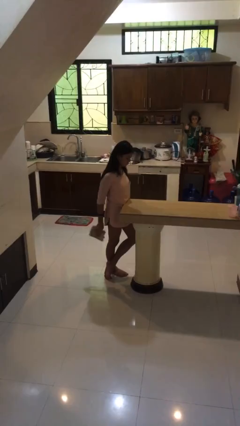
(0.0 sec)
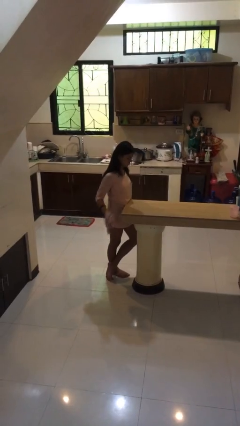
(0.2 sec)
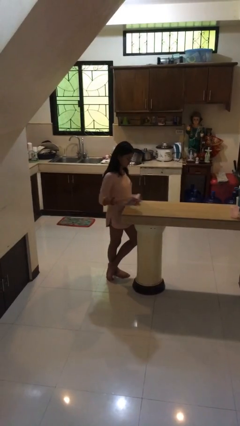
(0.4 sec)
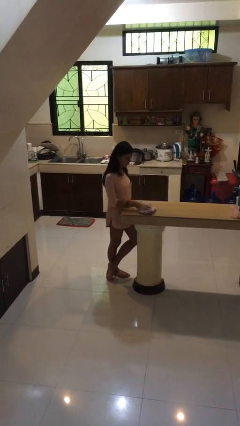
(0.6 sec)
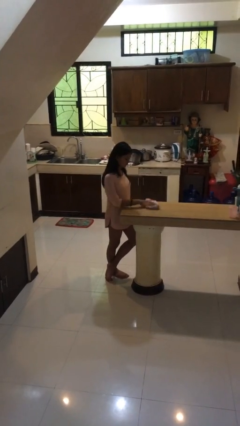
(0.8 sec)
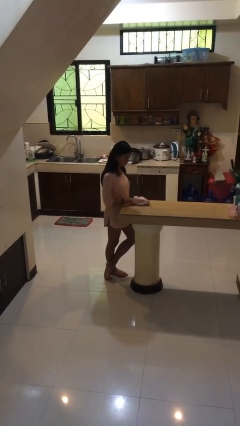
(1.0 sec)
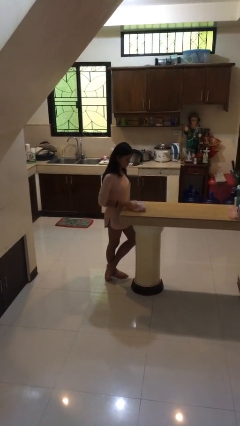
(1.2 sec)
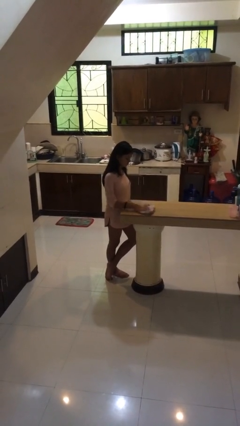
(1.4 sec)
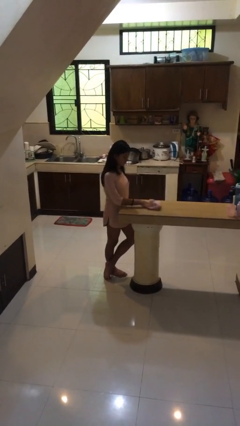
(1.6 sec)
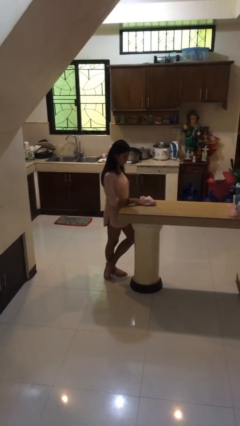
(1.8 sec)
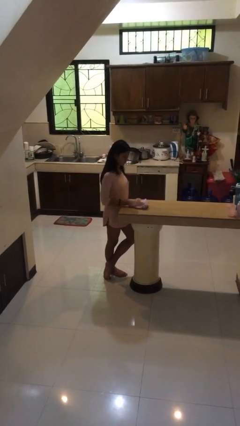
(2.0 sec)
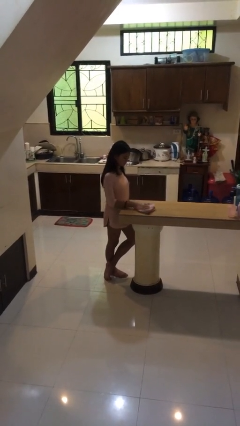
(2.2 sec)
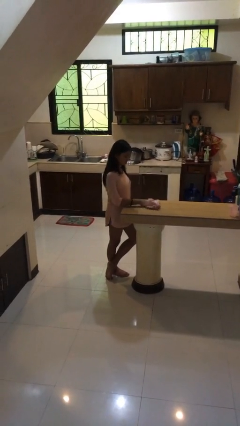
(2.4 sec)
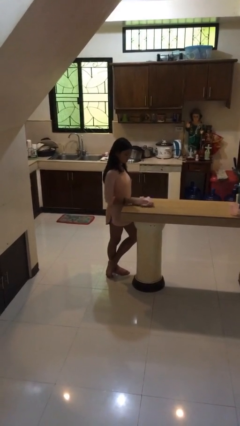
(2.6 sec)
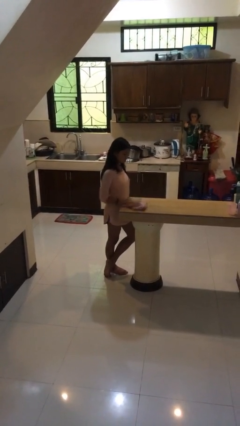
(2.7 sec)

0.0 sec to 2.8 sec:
person cleans table with rag

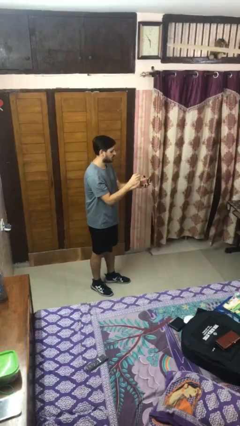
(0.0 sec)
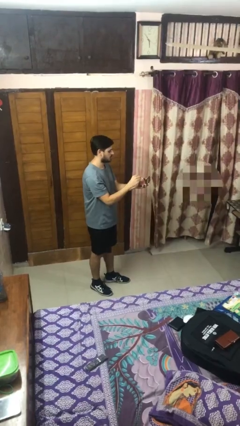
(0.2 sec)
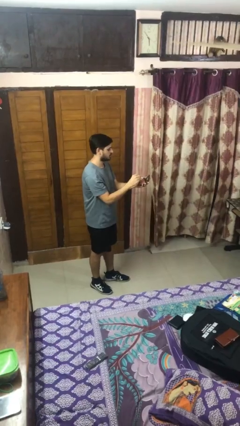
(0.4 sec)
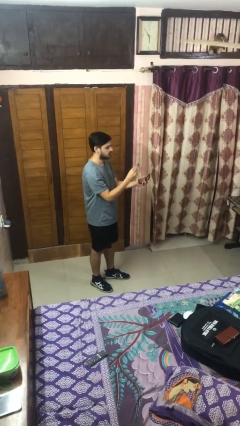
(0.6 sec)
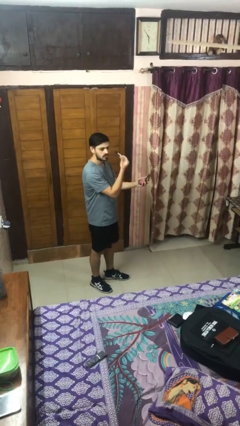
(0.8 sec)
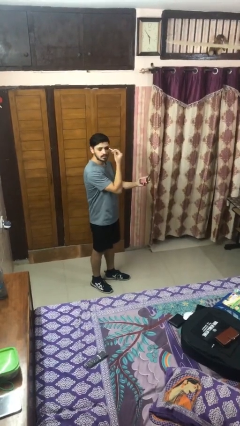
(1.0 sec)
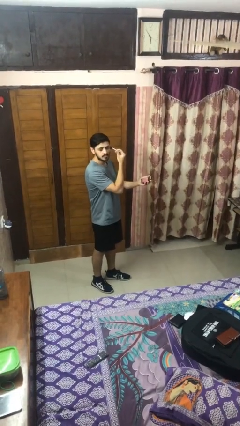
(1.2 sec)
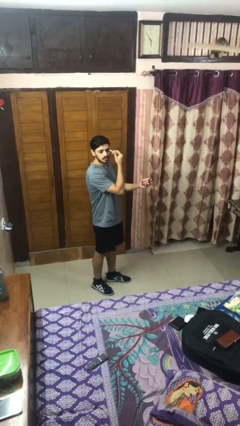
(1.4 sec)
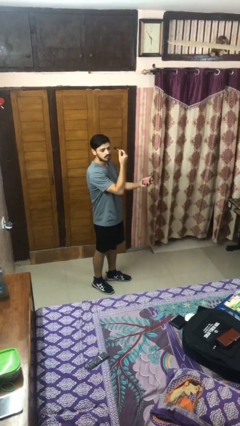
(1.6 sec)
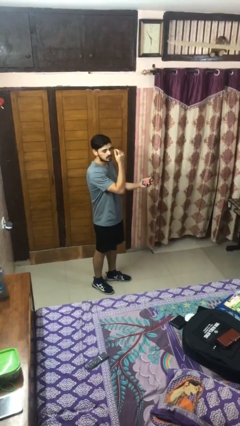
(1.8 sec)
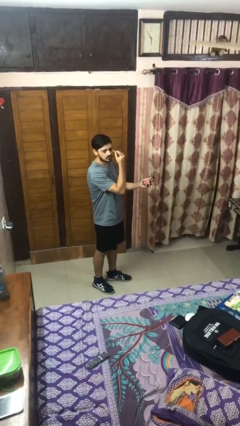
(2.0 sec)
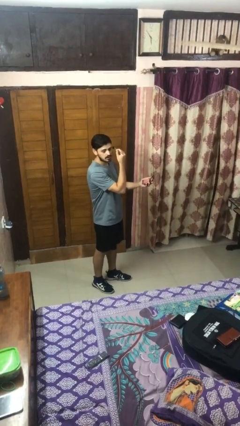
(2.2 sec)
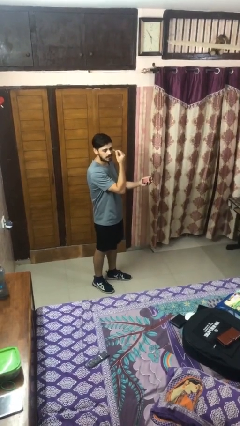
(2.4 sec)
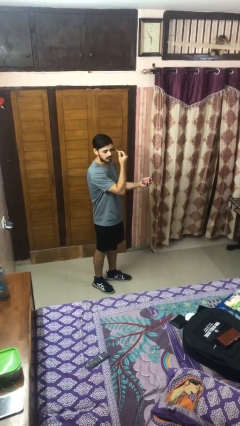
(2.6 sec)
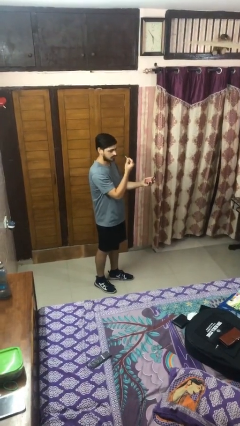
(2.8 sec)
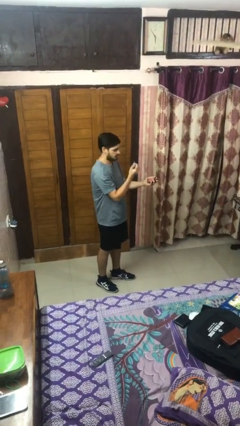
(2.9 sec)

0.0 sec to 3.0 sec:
person applies eye makeup

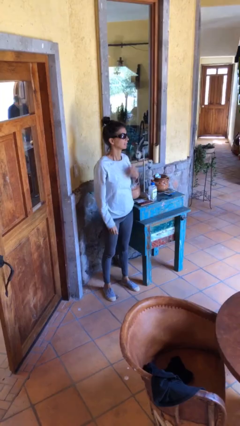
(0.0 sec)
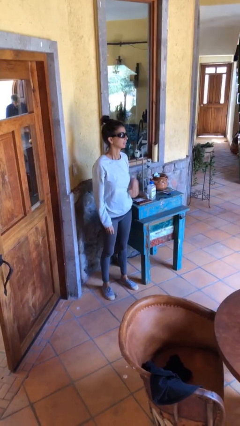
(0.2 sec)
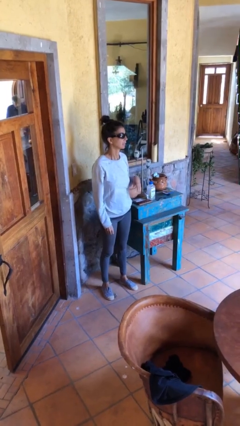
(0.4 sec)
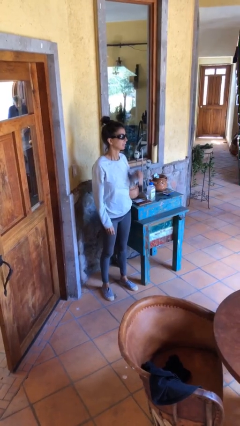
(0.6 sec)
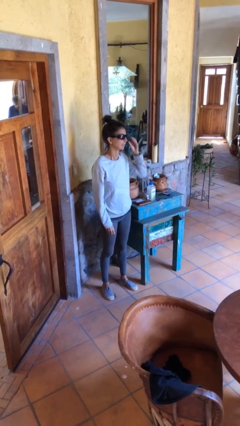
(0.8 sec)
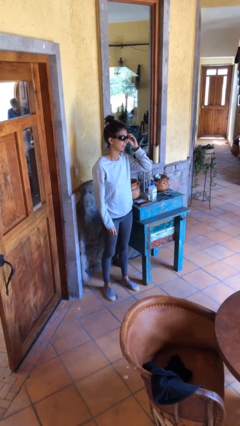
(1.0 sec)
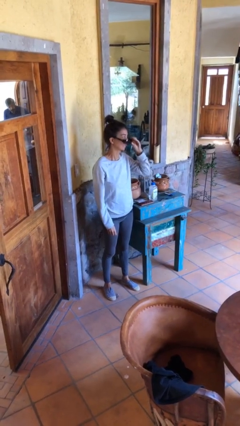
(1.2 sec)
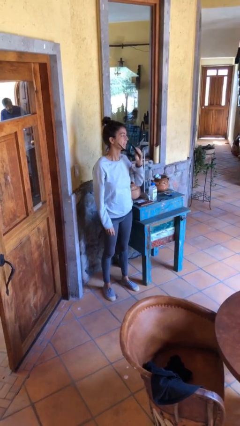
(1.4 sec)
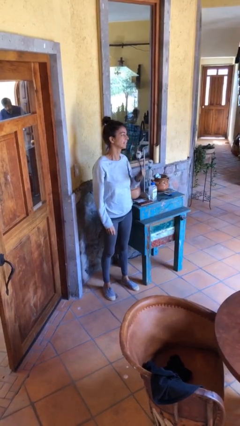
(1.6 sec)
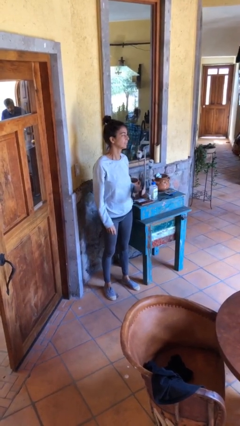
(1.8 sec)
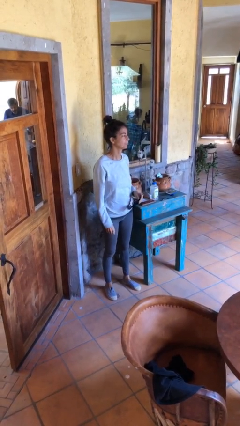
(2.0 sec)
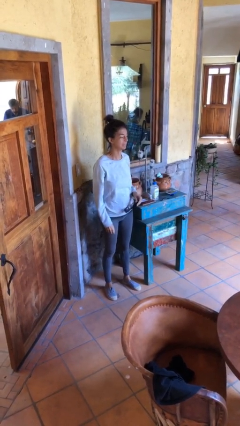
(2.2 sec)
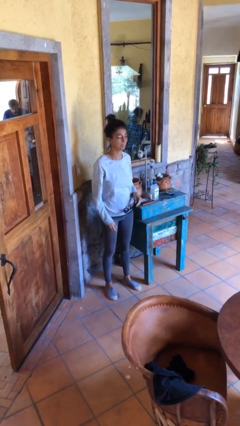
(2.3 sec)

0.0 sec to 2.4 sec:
person takes off sunglasses

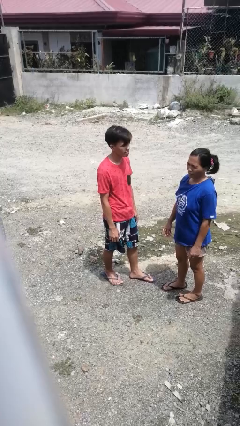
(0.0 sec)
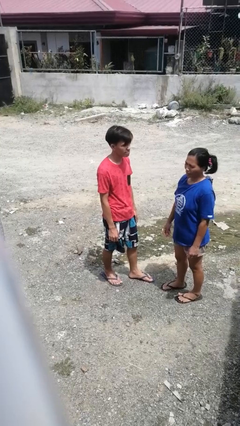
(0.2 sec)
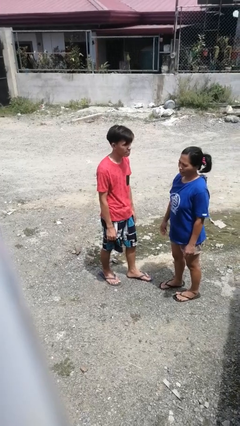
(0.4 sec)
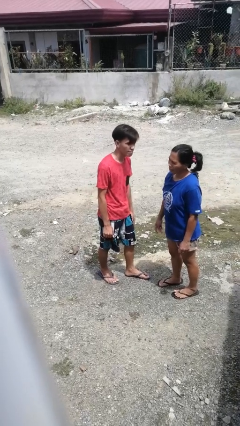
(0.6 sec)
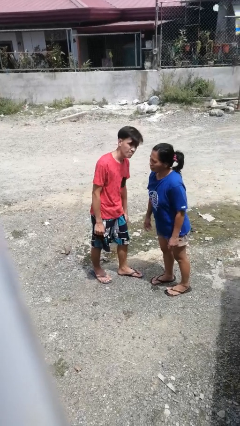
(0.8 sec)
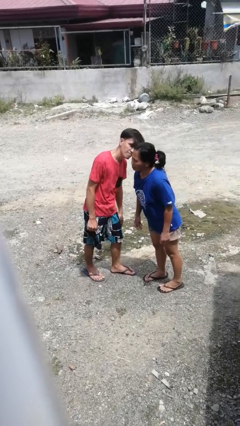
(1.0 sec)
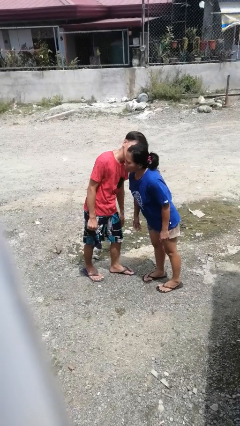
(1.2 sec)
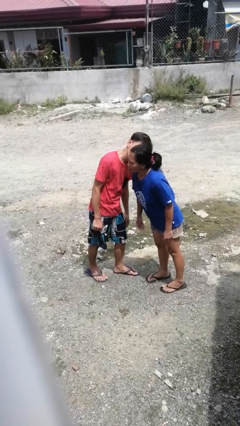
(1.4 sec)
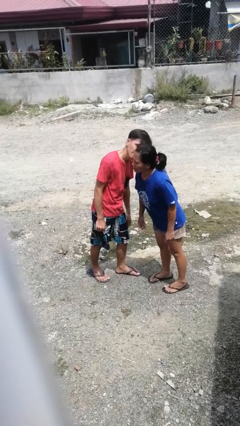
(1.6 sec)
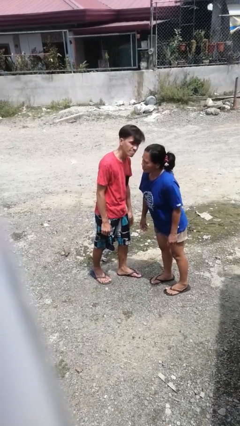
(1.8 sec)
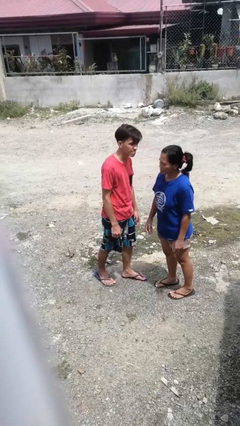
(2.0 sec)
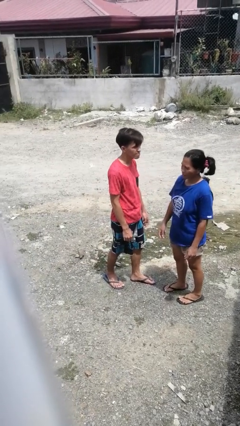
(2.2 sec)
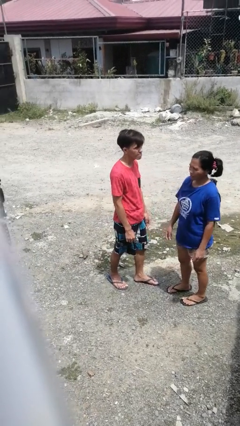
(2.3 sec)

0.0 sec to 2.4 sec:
person kisses cheek of person

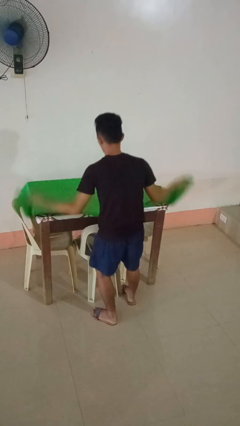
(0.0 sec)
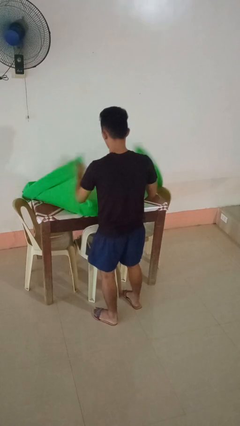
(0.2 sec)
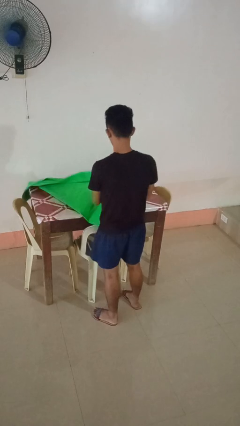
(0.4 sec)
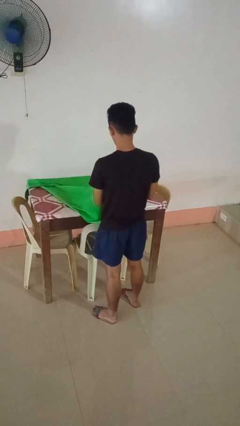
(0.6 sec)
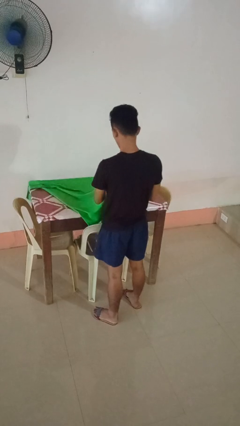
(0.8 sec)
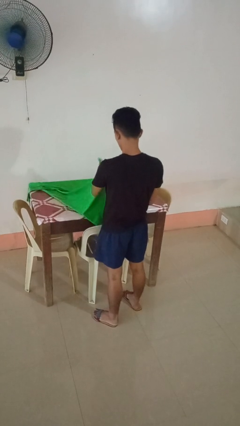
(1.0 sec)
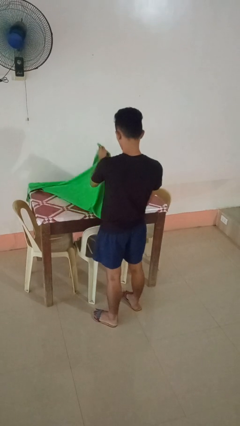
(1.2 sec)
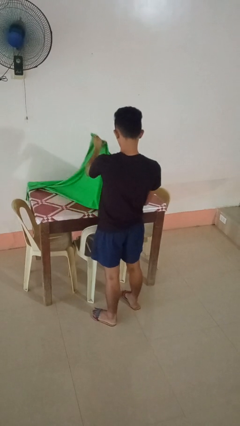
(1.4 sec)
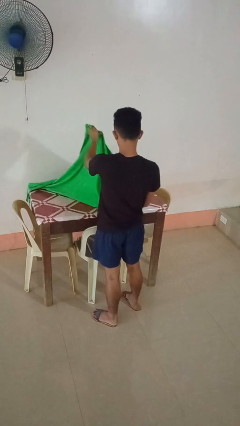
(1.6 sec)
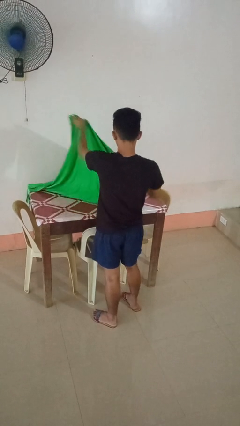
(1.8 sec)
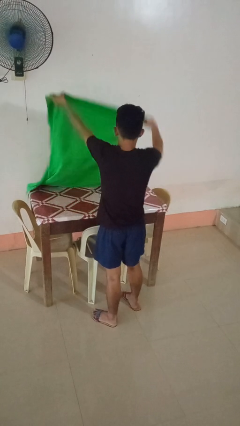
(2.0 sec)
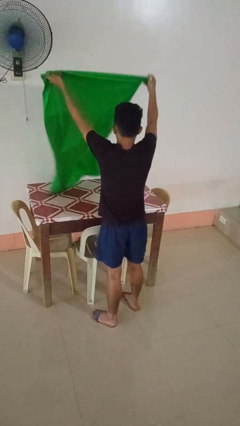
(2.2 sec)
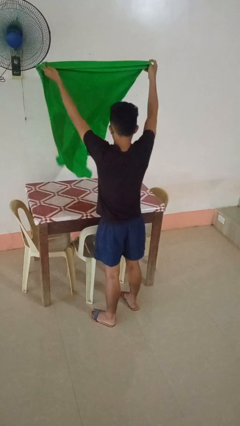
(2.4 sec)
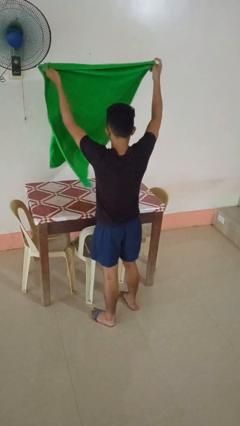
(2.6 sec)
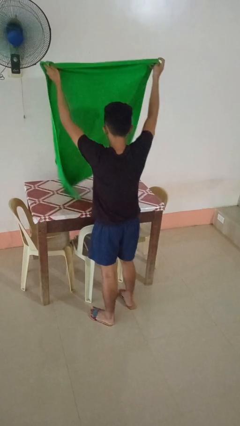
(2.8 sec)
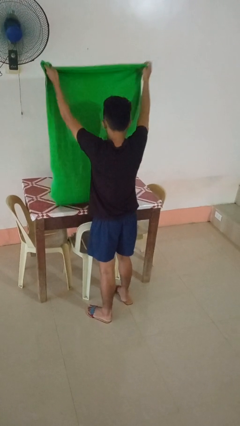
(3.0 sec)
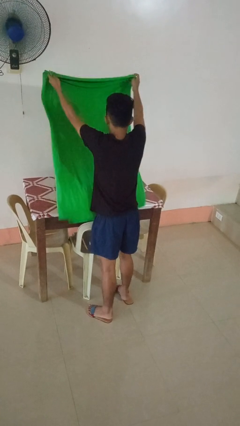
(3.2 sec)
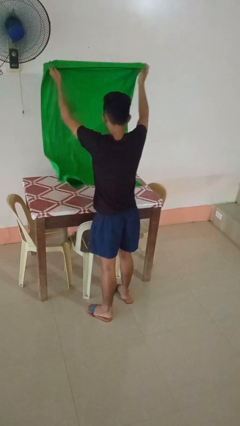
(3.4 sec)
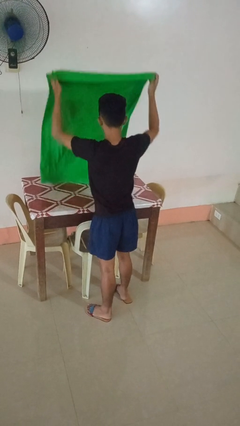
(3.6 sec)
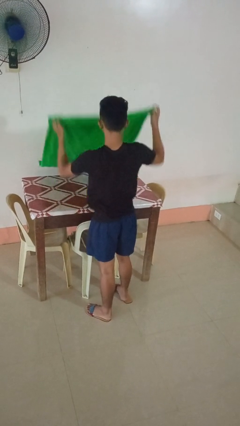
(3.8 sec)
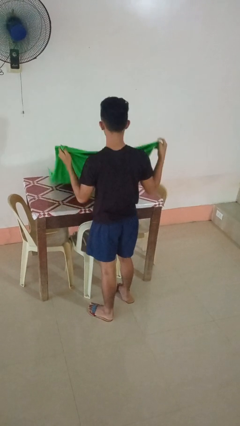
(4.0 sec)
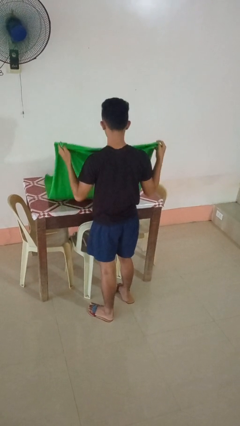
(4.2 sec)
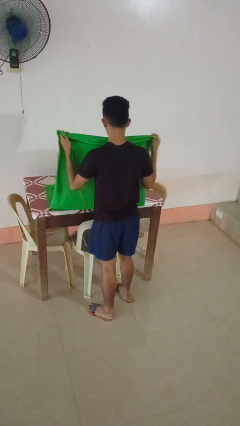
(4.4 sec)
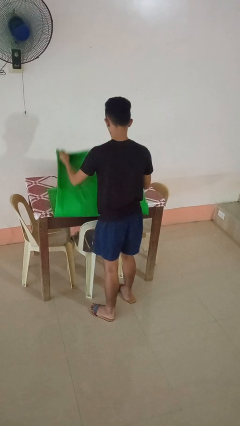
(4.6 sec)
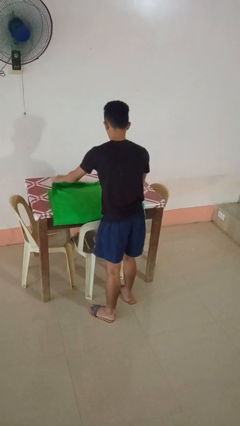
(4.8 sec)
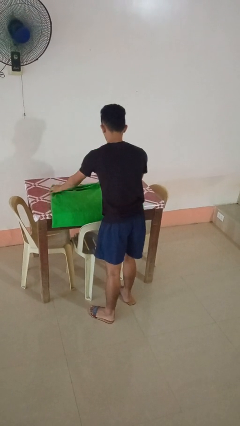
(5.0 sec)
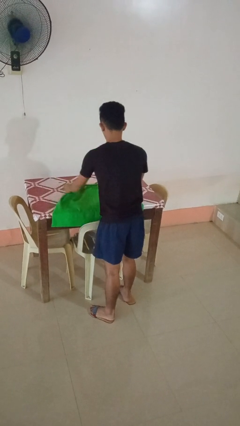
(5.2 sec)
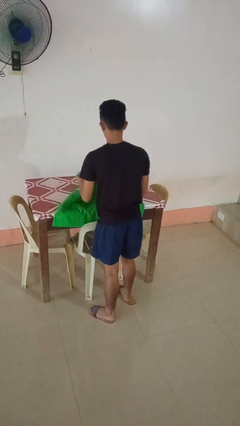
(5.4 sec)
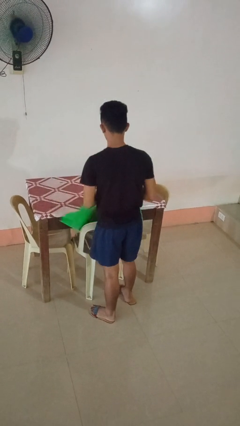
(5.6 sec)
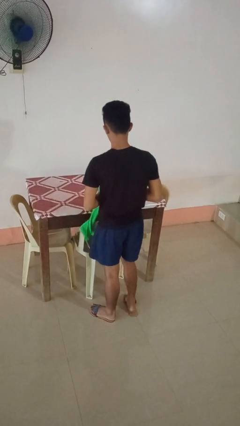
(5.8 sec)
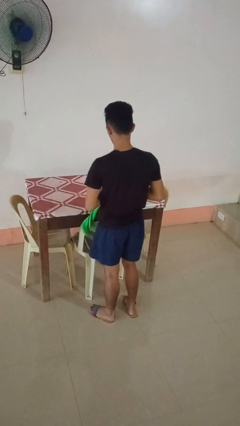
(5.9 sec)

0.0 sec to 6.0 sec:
person folds tablecloth

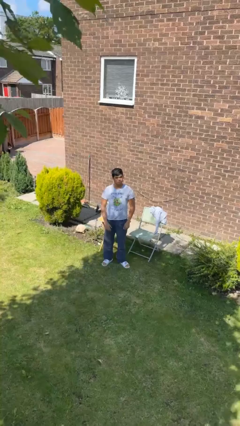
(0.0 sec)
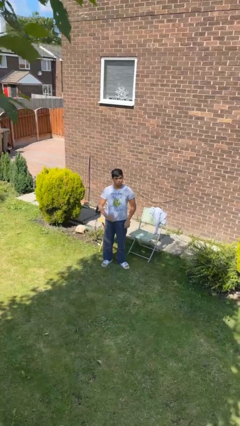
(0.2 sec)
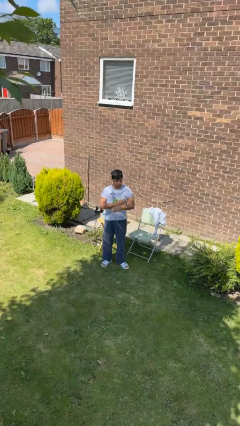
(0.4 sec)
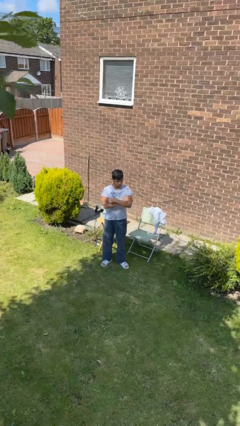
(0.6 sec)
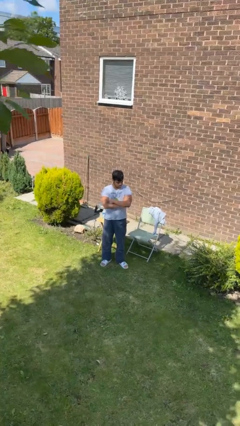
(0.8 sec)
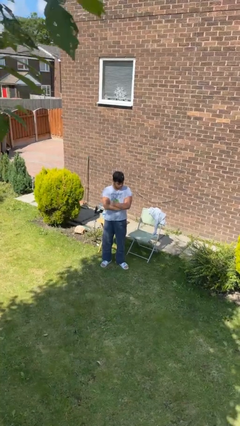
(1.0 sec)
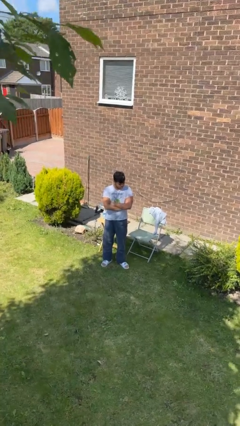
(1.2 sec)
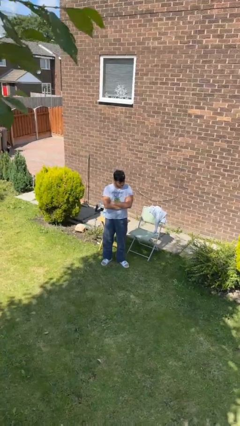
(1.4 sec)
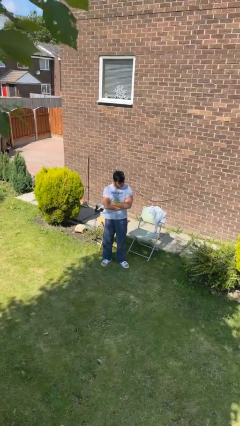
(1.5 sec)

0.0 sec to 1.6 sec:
person crosses arms
